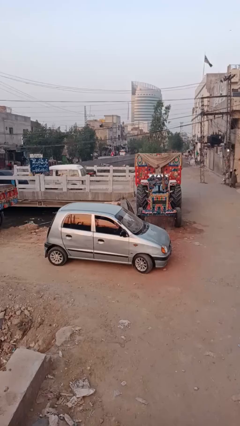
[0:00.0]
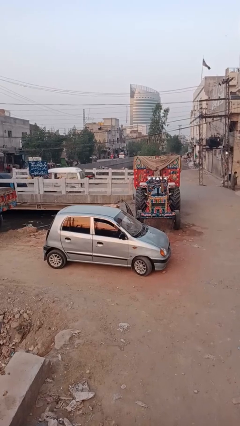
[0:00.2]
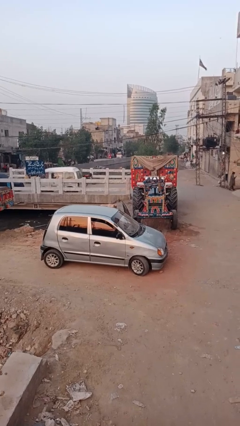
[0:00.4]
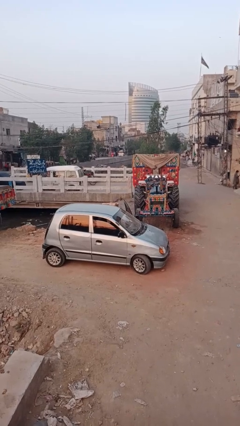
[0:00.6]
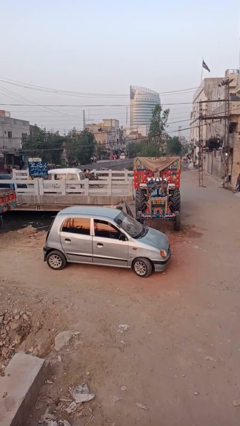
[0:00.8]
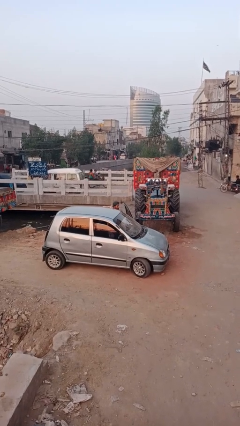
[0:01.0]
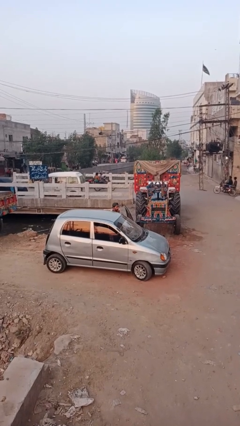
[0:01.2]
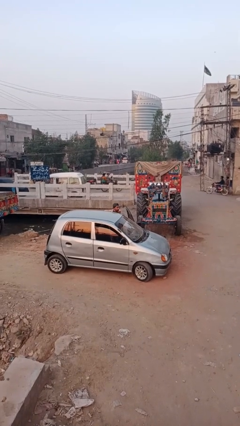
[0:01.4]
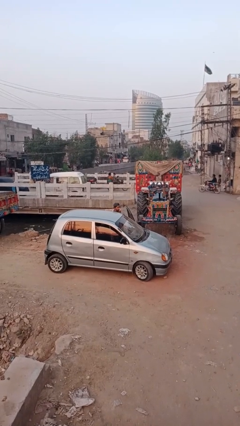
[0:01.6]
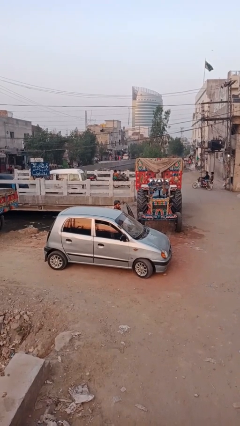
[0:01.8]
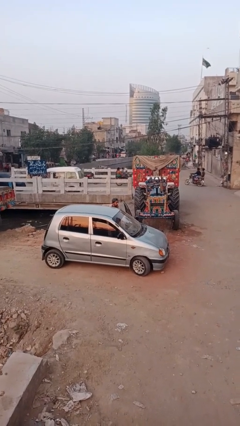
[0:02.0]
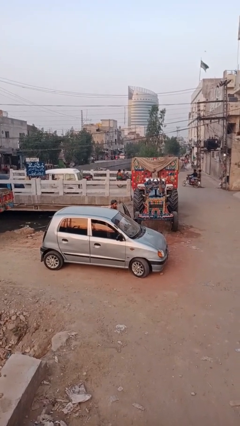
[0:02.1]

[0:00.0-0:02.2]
person exits car

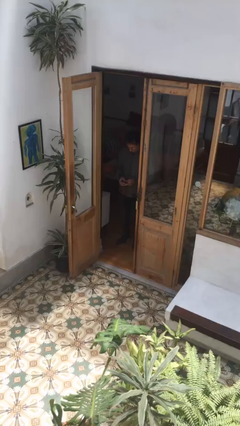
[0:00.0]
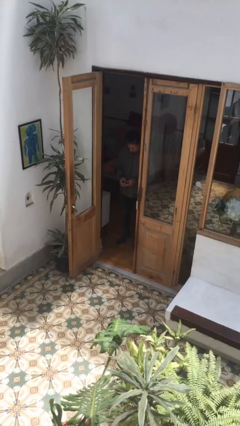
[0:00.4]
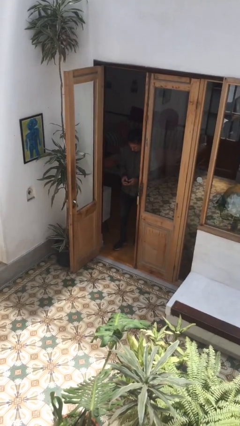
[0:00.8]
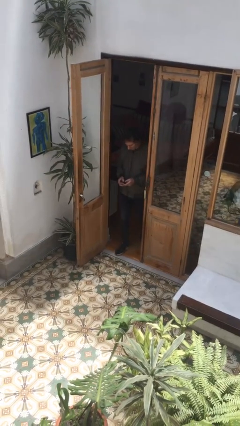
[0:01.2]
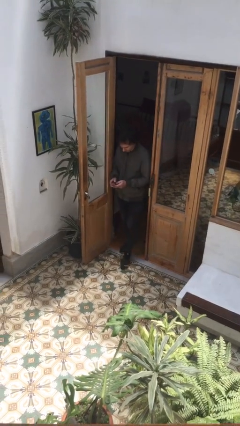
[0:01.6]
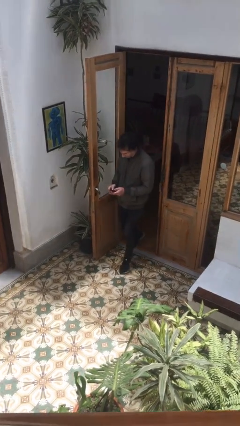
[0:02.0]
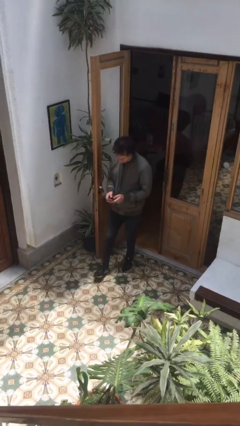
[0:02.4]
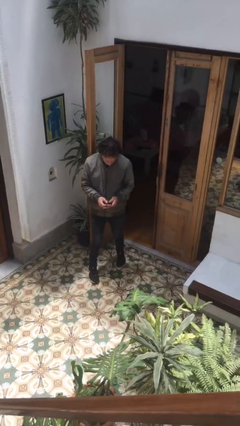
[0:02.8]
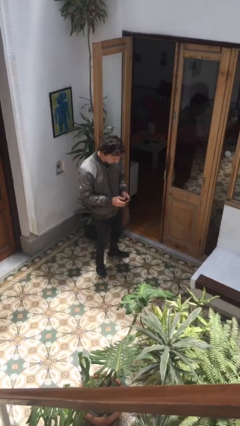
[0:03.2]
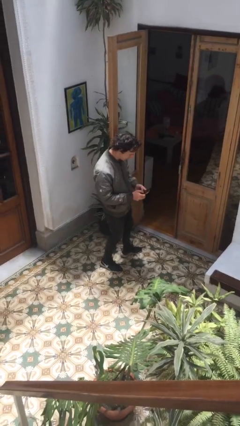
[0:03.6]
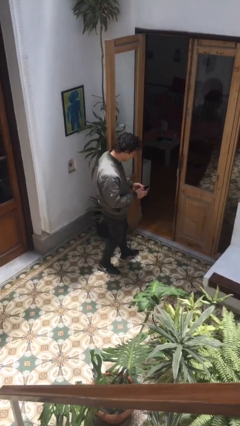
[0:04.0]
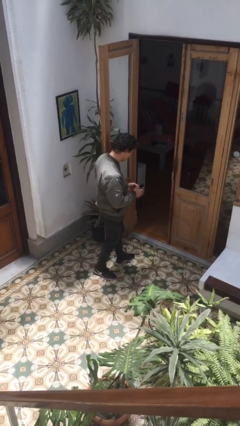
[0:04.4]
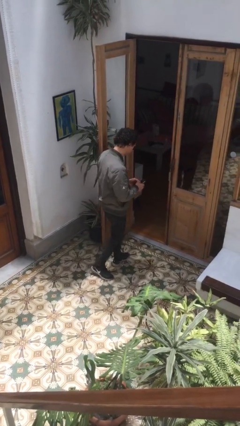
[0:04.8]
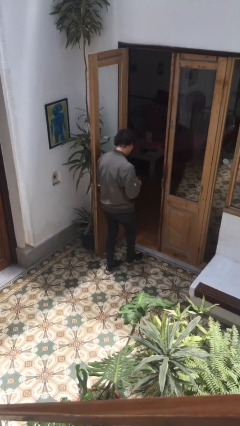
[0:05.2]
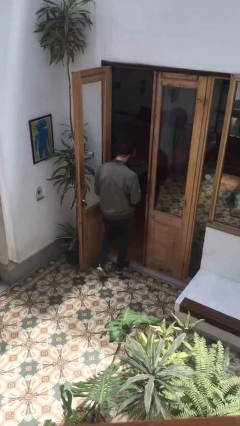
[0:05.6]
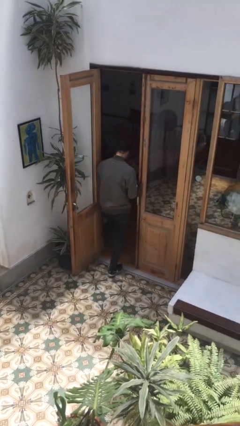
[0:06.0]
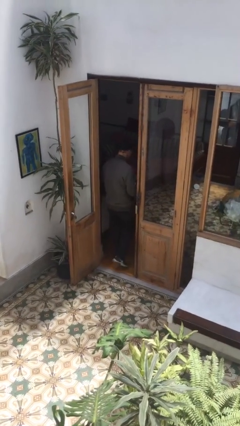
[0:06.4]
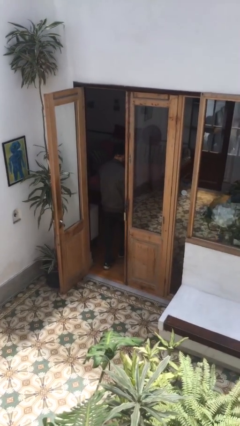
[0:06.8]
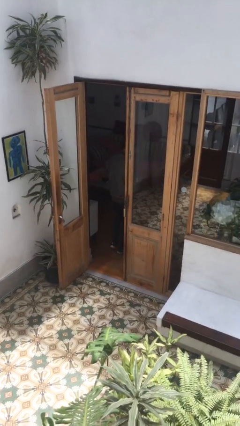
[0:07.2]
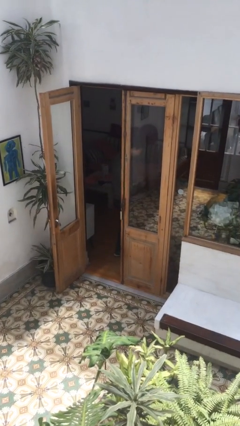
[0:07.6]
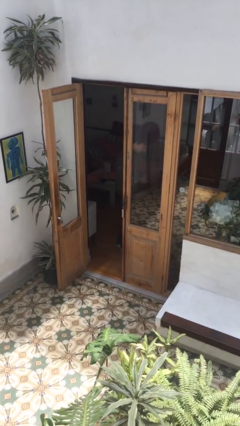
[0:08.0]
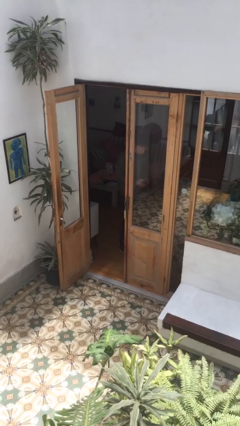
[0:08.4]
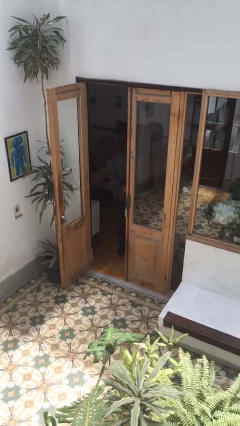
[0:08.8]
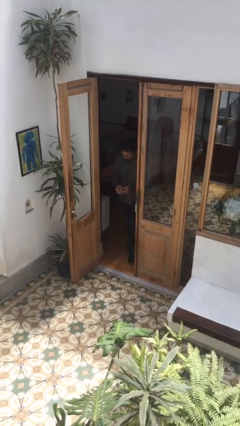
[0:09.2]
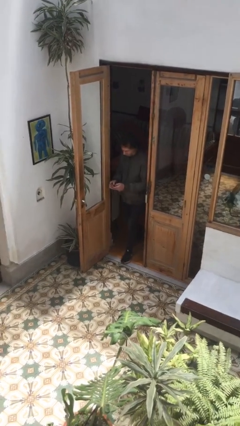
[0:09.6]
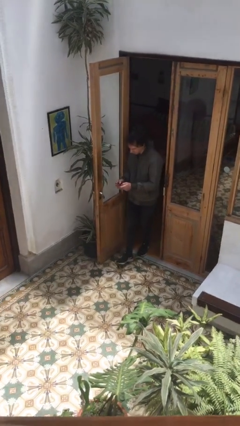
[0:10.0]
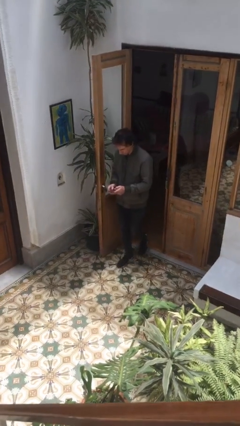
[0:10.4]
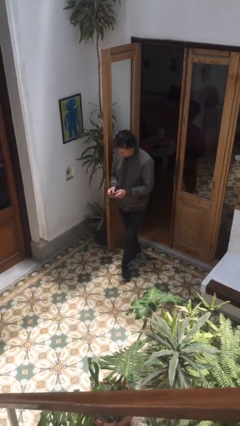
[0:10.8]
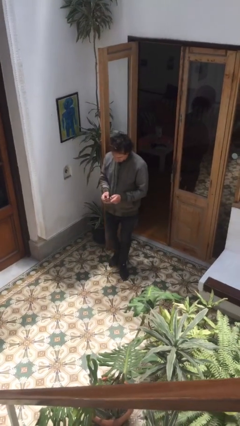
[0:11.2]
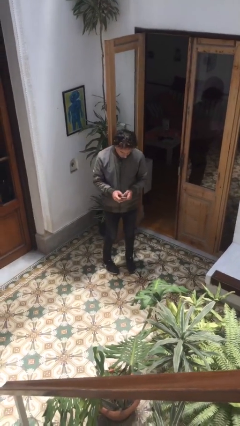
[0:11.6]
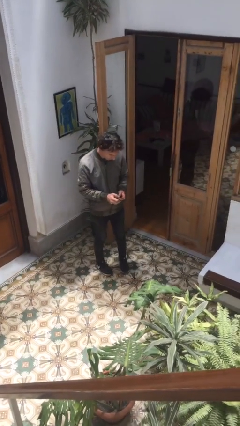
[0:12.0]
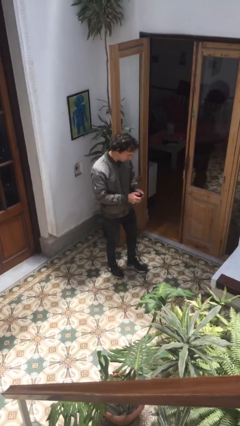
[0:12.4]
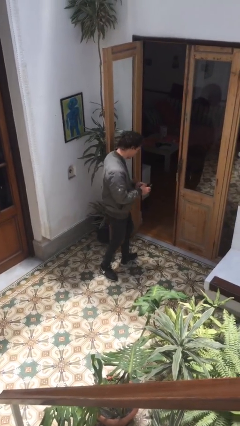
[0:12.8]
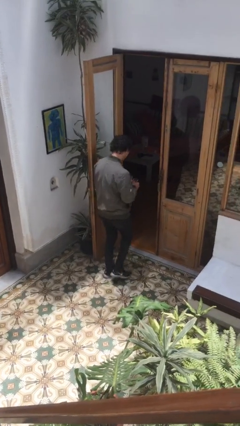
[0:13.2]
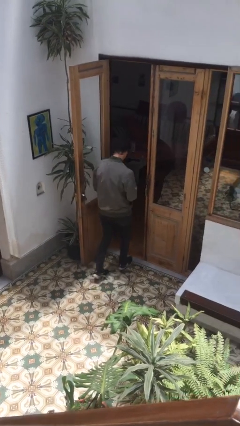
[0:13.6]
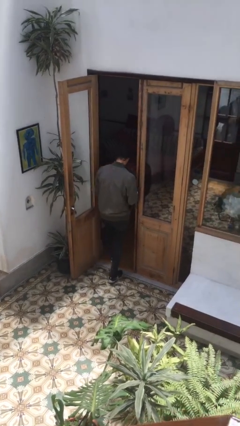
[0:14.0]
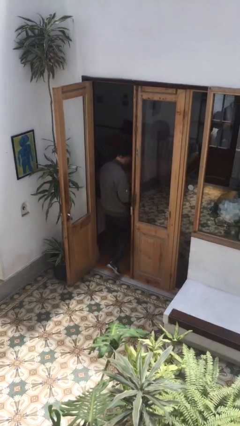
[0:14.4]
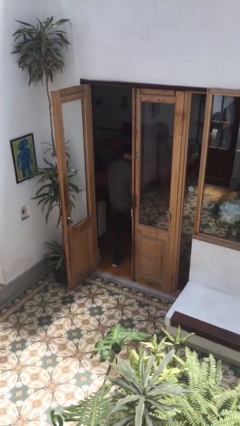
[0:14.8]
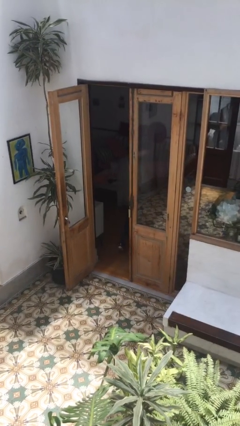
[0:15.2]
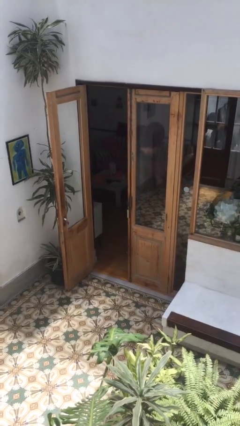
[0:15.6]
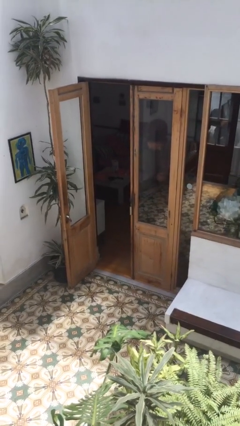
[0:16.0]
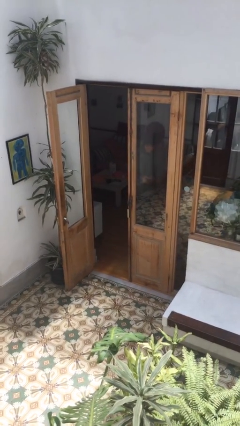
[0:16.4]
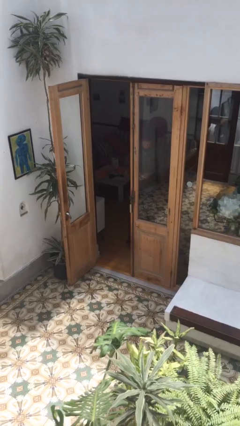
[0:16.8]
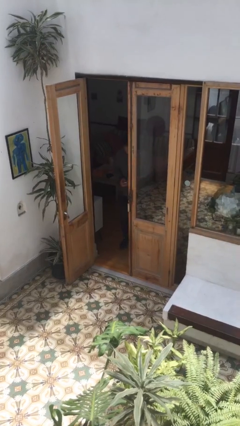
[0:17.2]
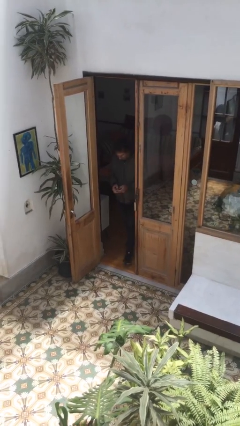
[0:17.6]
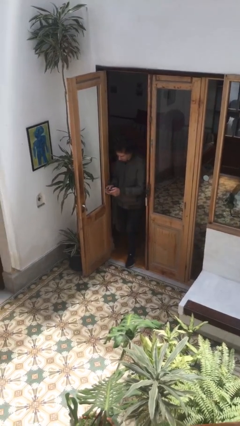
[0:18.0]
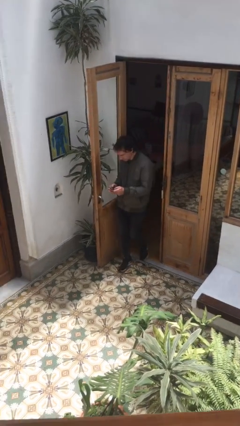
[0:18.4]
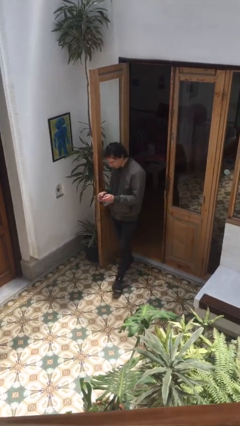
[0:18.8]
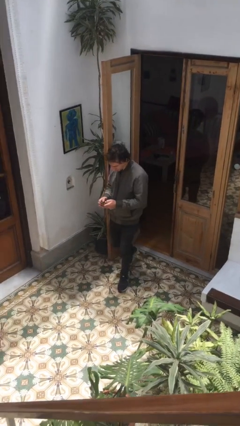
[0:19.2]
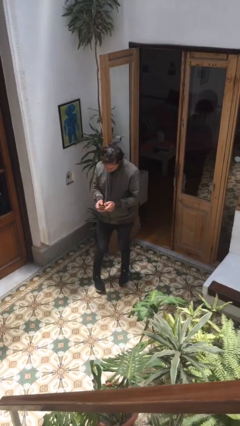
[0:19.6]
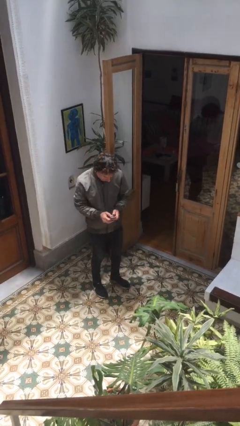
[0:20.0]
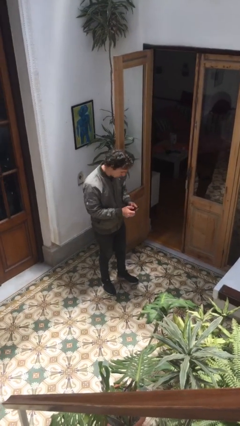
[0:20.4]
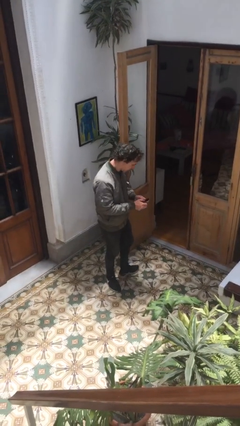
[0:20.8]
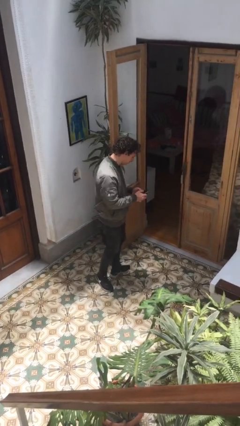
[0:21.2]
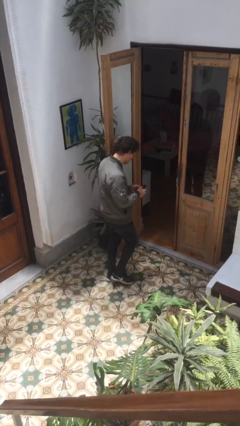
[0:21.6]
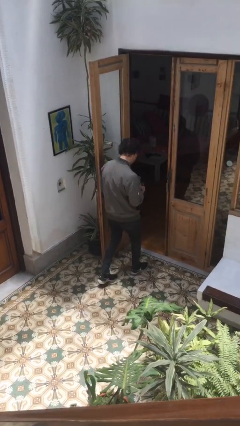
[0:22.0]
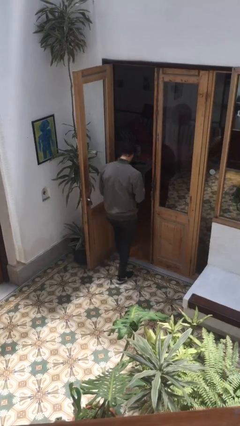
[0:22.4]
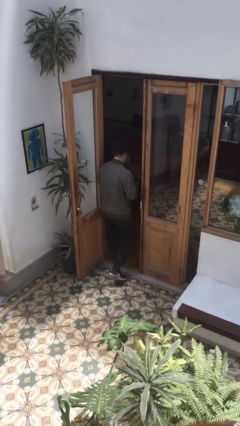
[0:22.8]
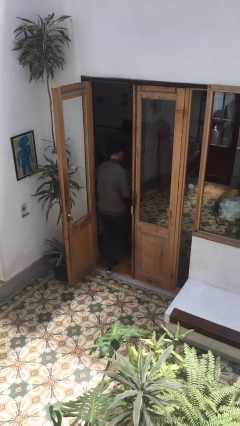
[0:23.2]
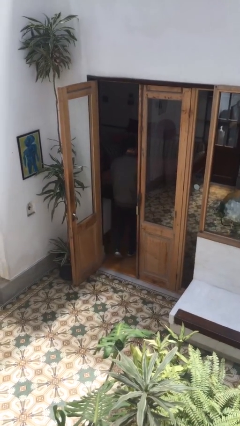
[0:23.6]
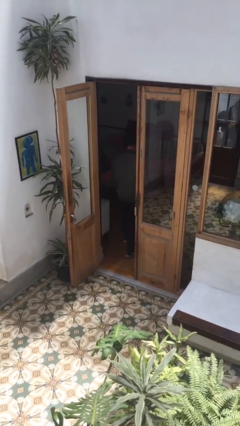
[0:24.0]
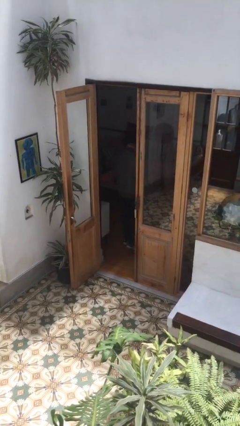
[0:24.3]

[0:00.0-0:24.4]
person texts on phone

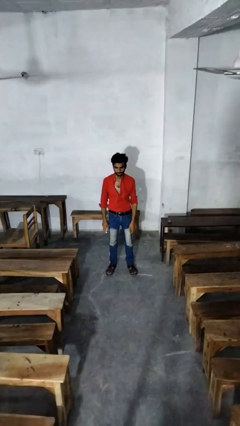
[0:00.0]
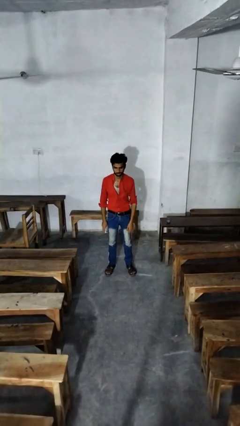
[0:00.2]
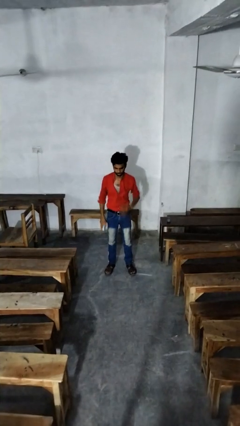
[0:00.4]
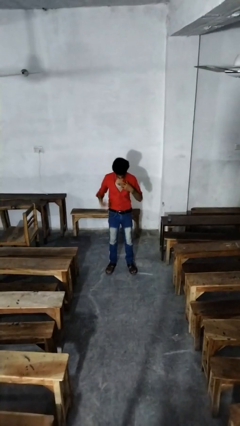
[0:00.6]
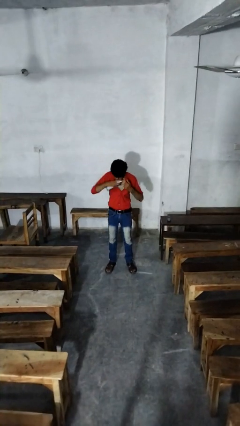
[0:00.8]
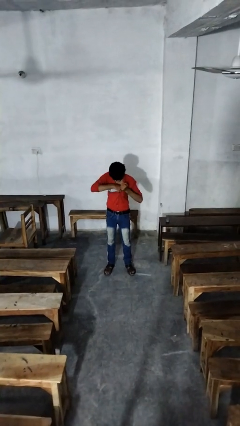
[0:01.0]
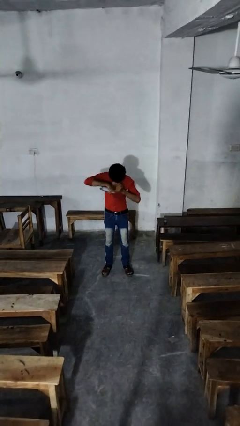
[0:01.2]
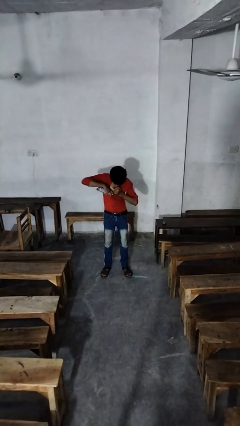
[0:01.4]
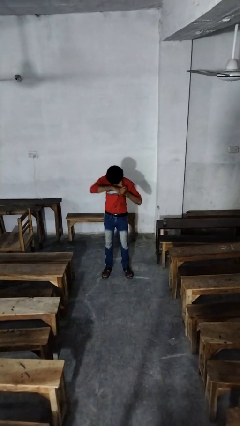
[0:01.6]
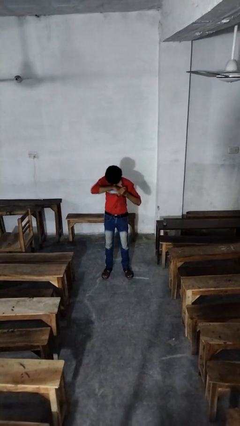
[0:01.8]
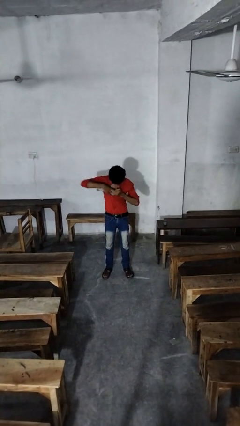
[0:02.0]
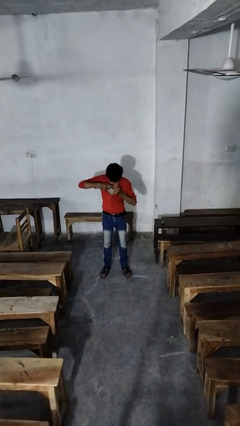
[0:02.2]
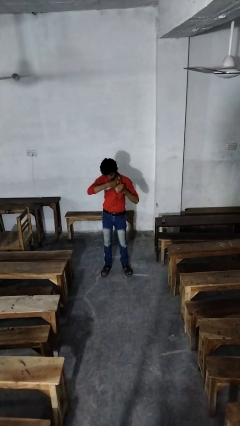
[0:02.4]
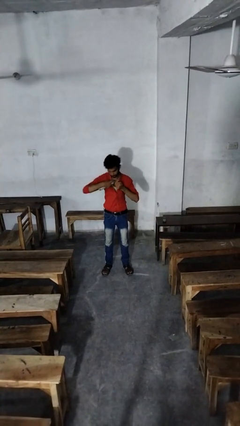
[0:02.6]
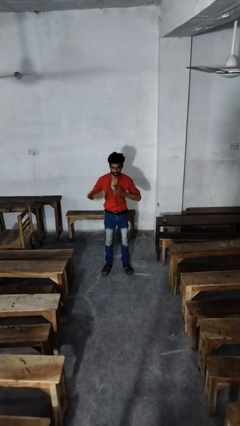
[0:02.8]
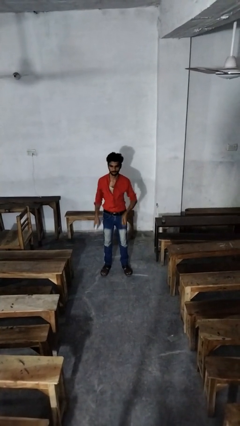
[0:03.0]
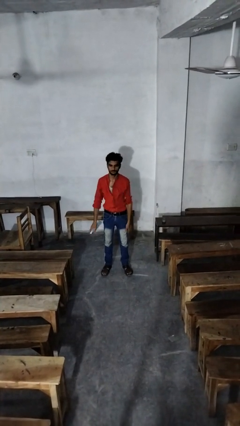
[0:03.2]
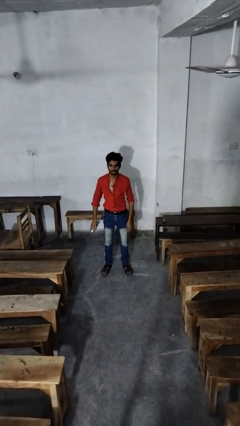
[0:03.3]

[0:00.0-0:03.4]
person applies deodorant

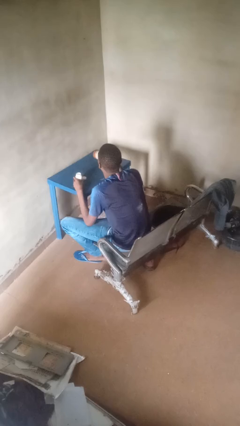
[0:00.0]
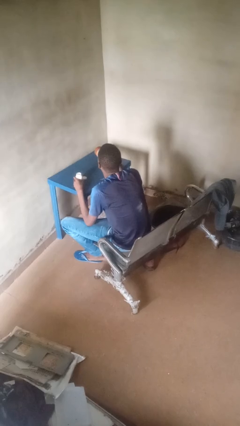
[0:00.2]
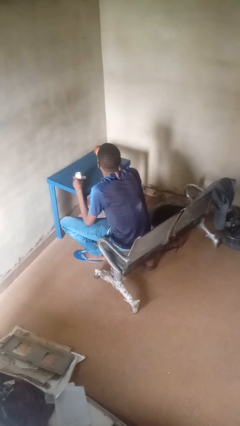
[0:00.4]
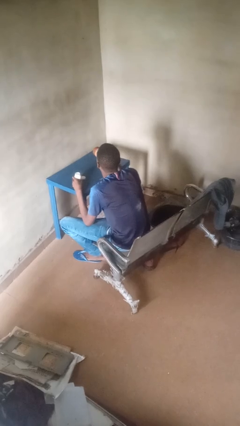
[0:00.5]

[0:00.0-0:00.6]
person drinks from cup
